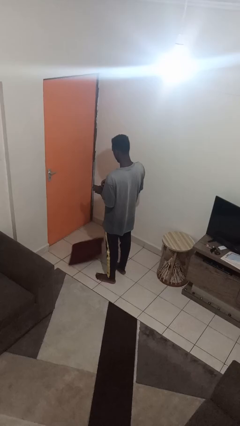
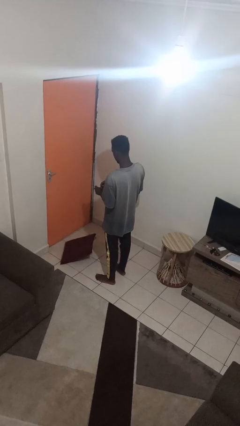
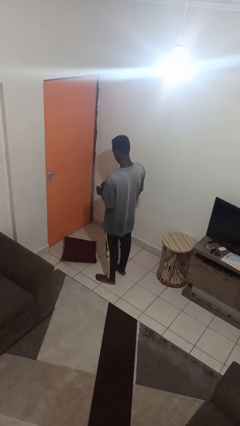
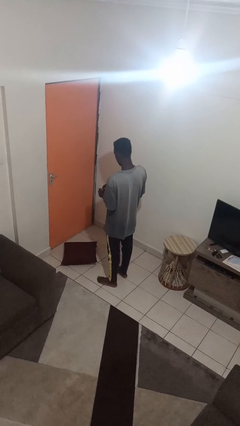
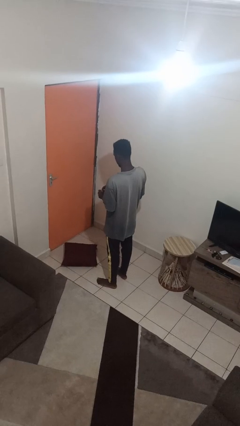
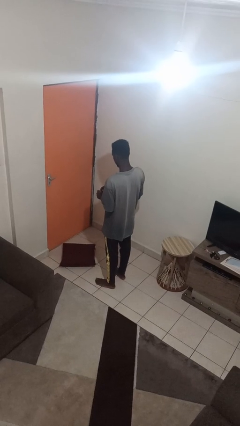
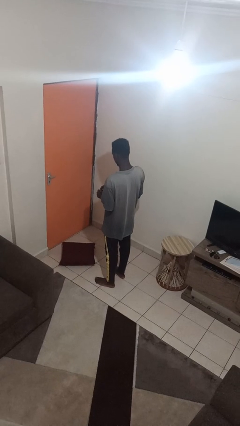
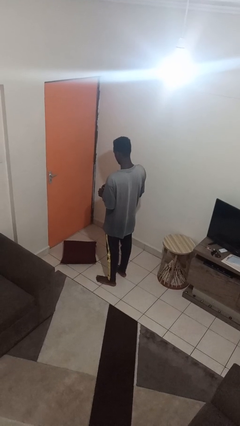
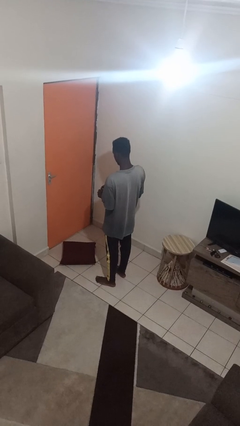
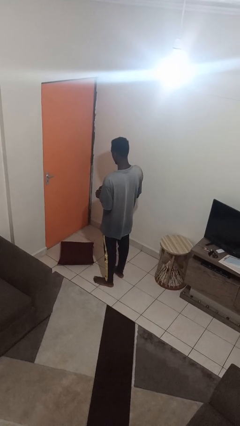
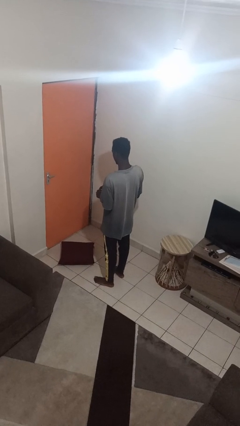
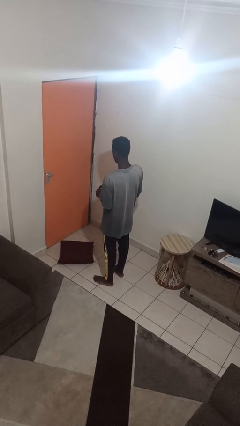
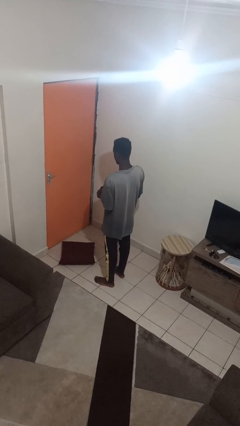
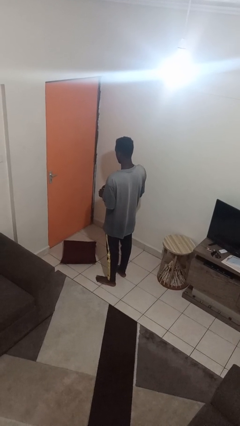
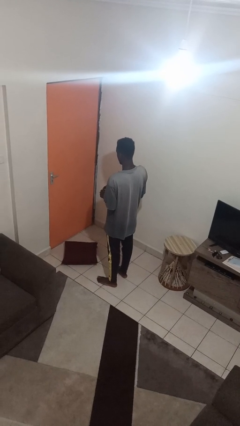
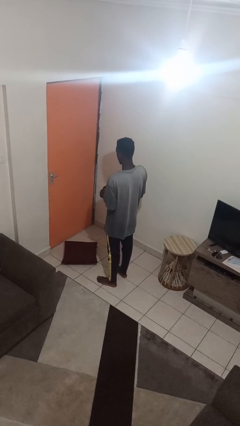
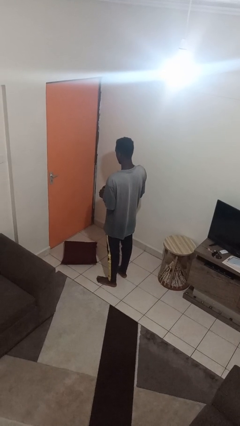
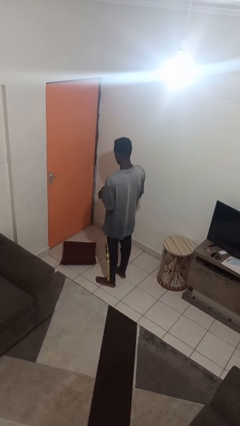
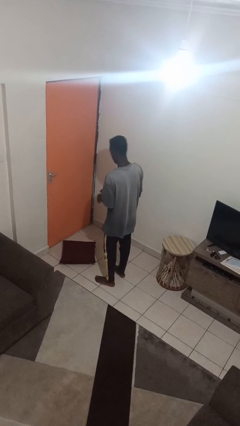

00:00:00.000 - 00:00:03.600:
person drops object

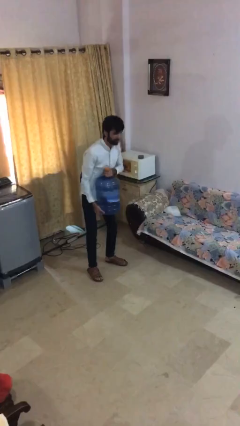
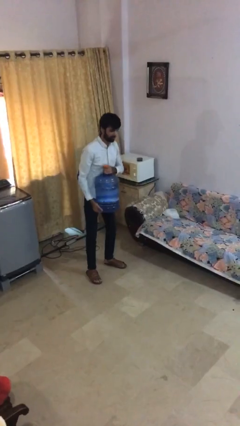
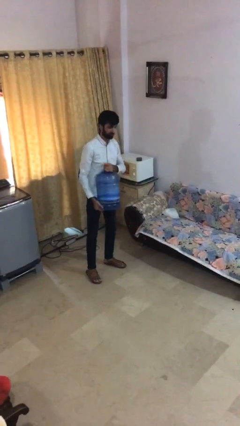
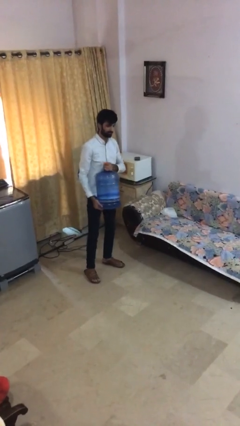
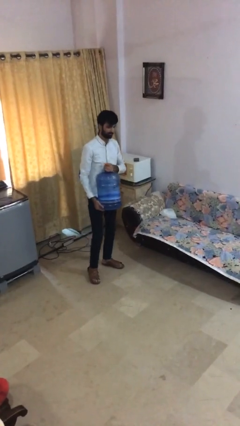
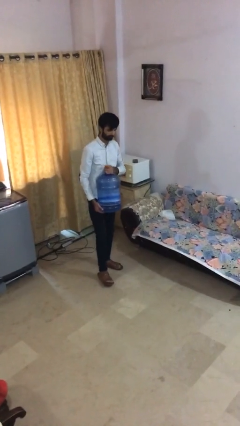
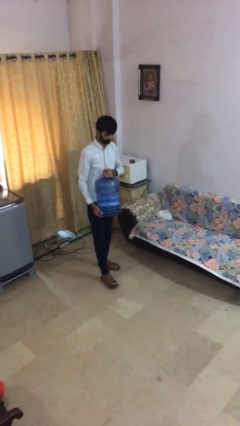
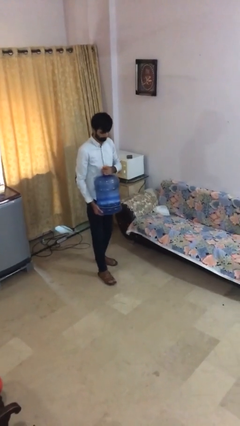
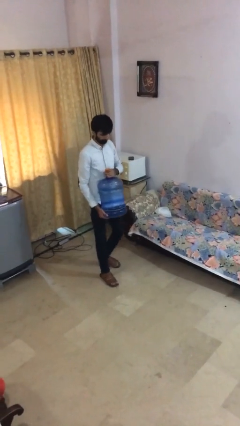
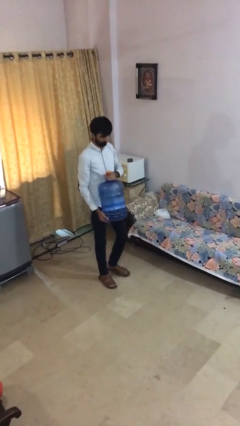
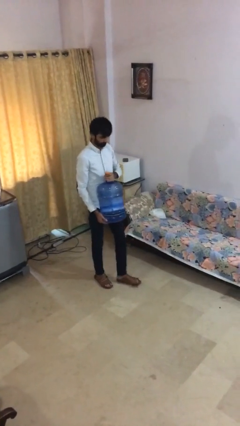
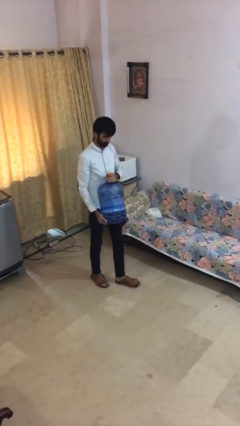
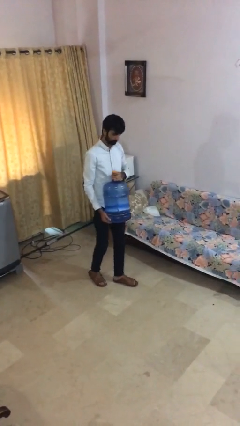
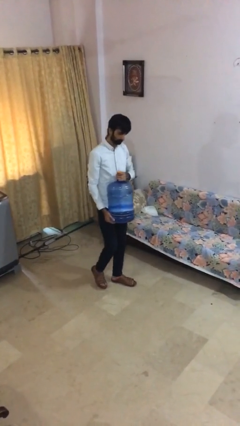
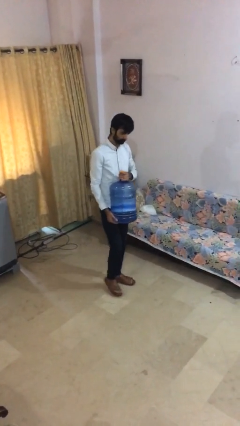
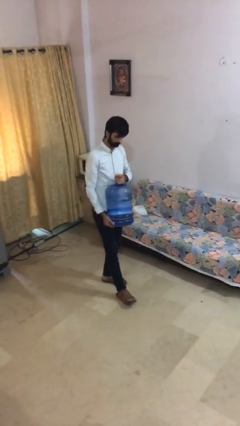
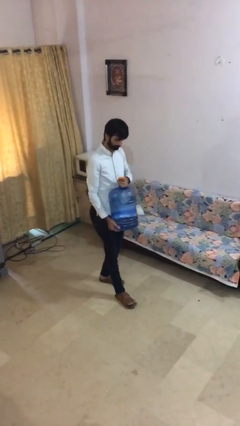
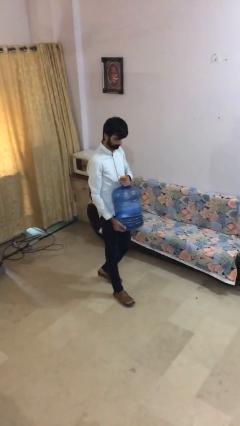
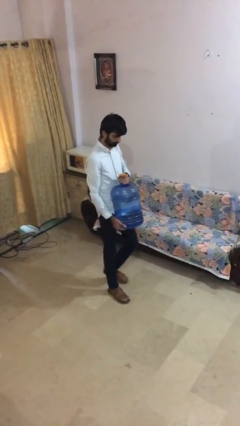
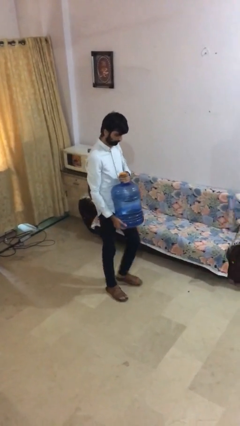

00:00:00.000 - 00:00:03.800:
person carries heavy object

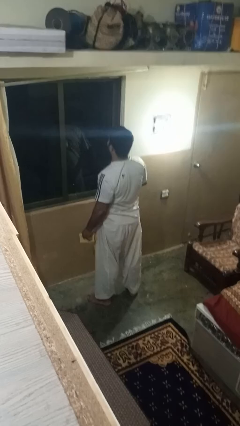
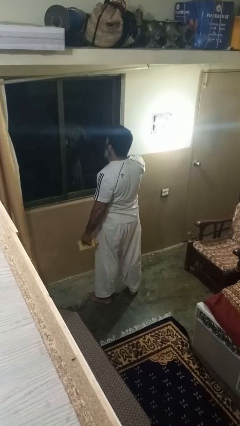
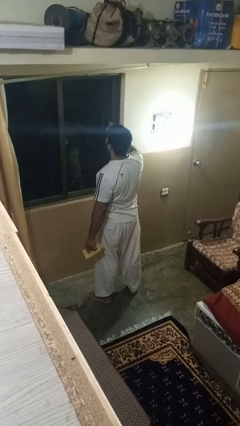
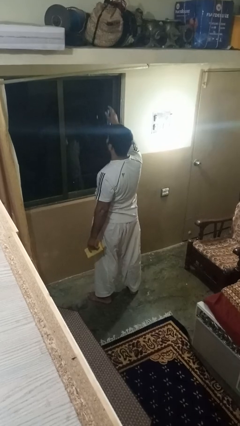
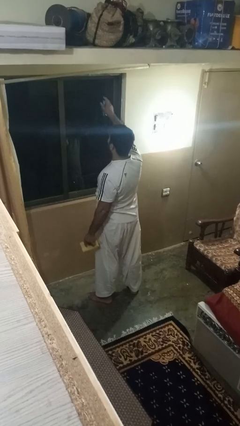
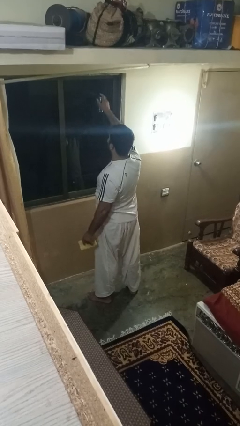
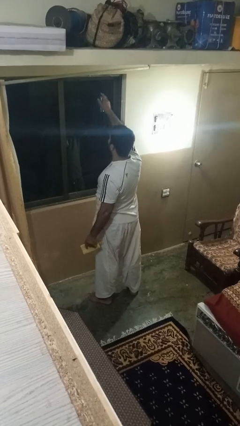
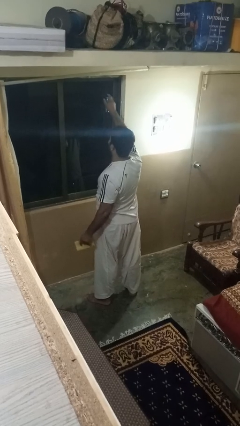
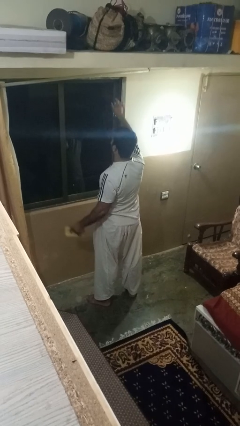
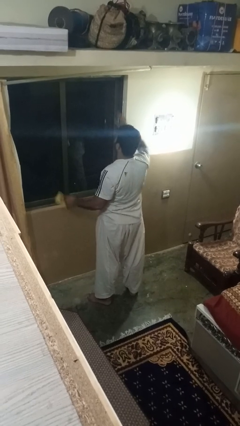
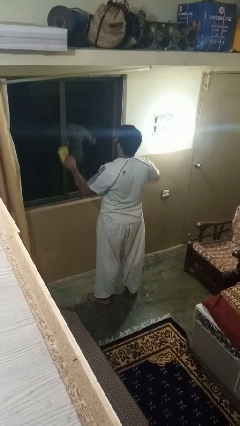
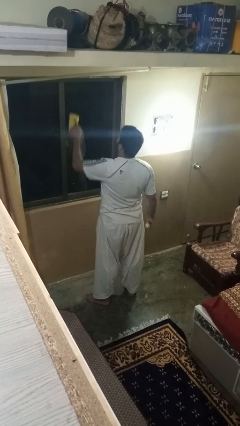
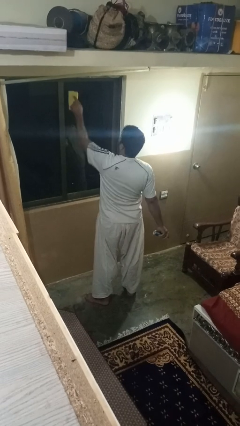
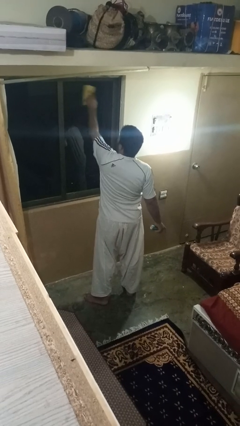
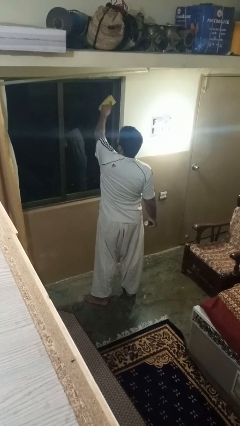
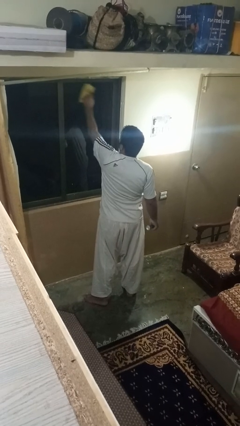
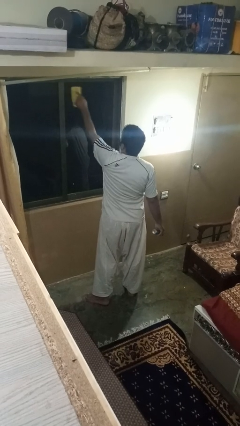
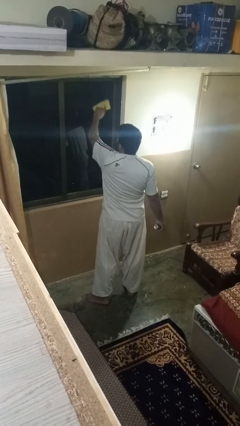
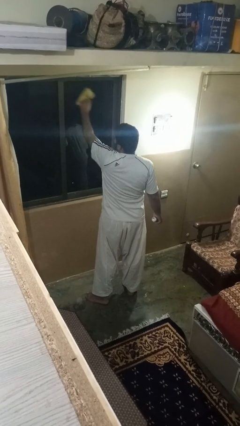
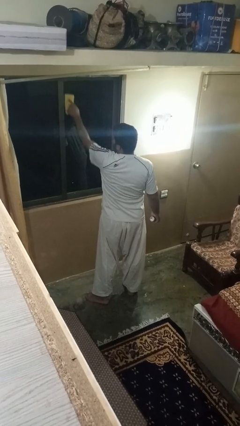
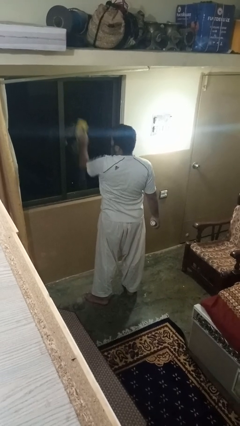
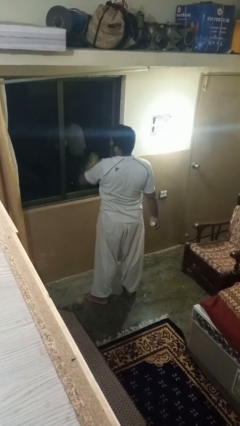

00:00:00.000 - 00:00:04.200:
person washes window

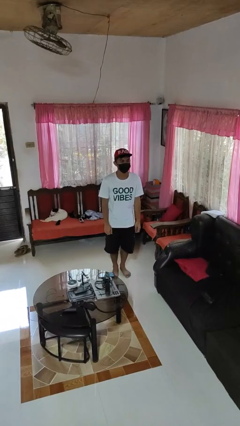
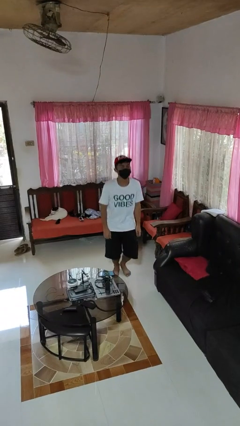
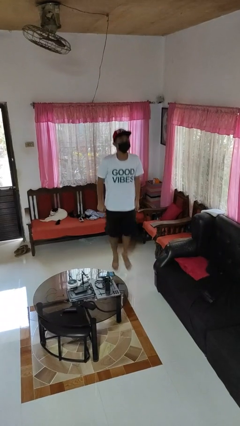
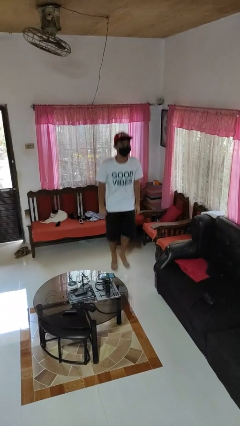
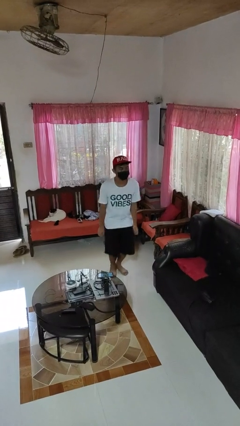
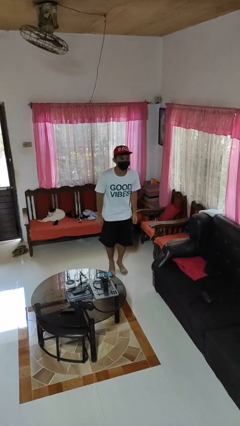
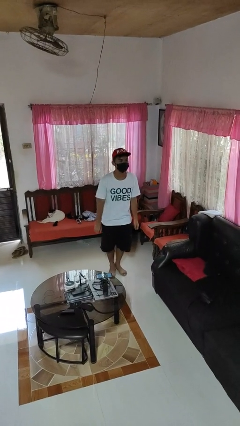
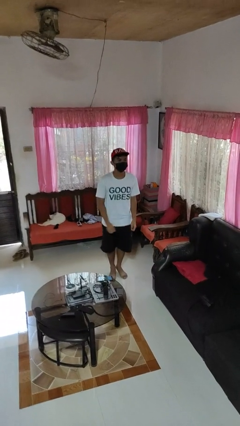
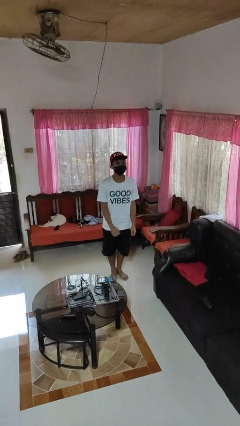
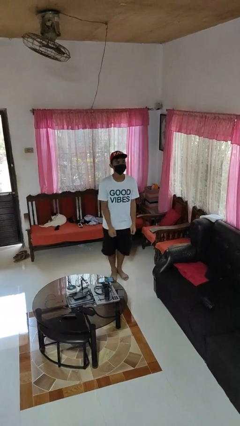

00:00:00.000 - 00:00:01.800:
person jumps

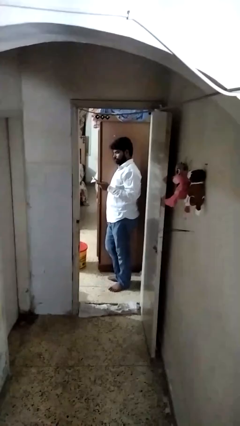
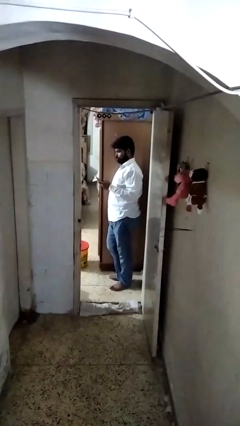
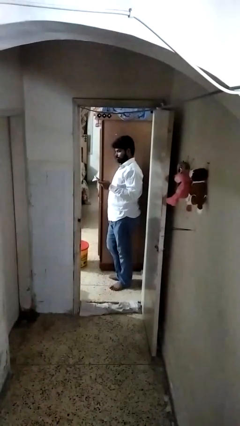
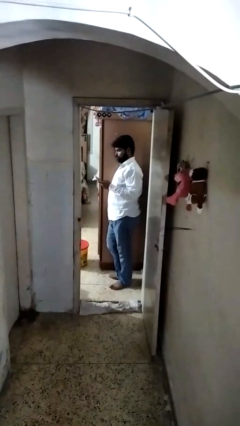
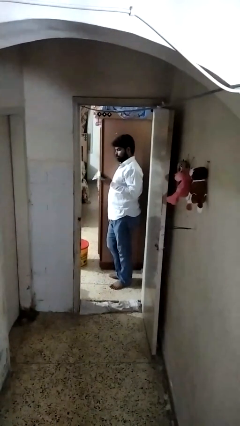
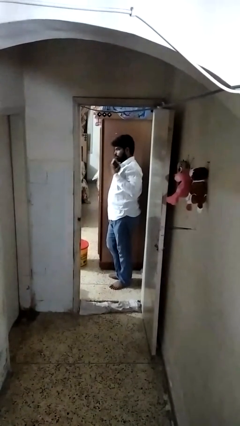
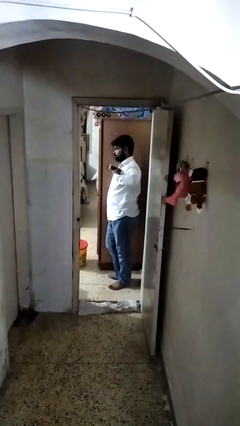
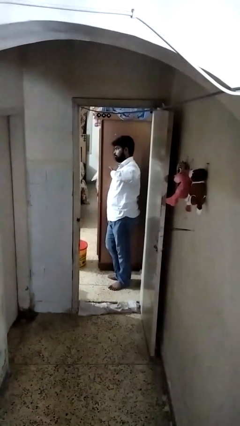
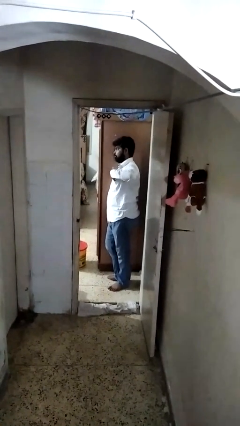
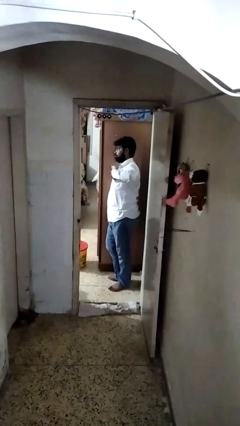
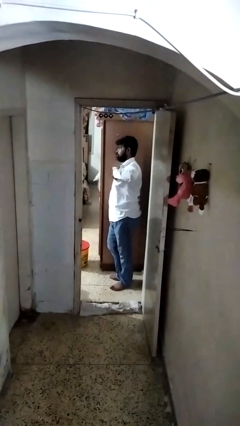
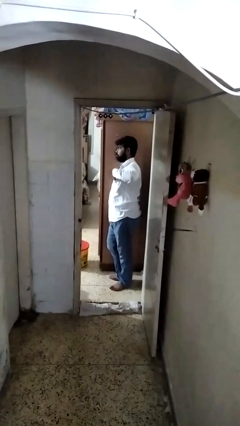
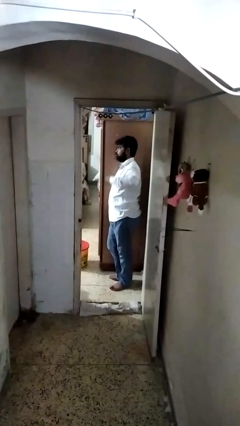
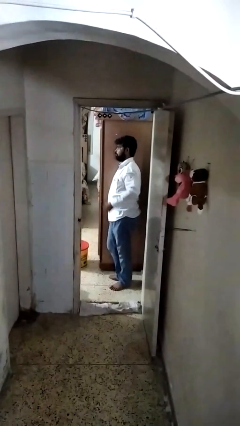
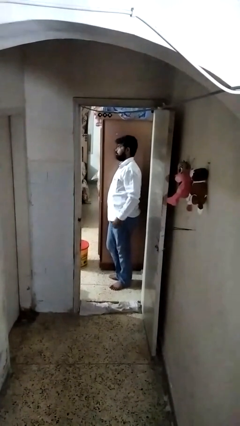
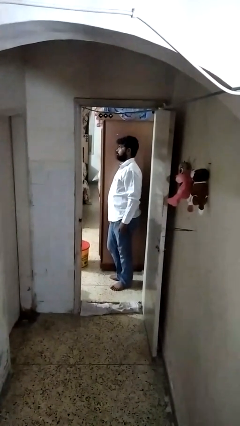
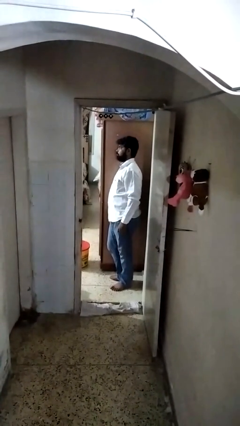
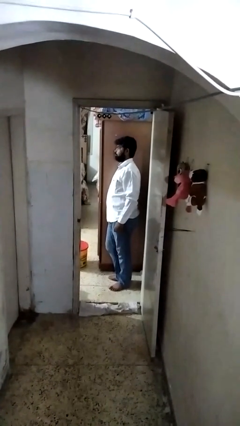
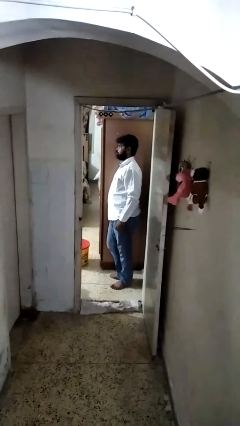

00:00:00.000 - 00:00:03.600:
person puts phone into pocket

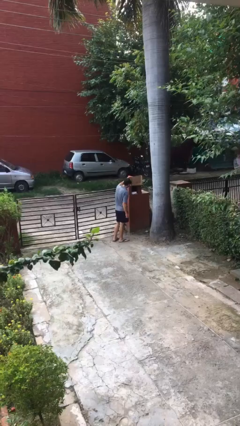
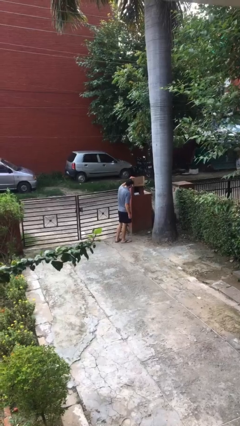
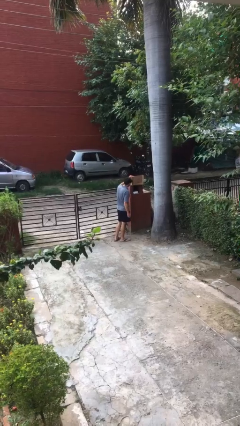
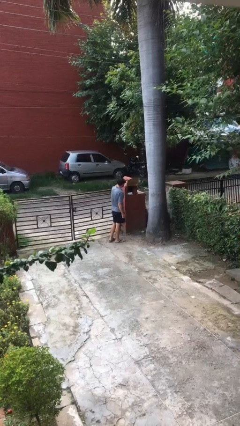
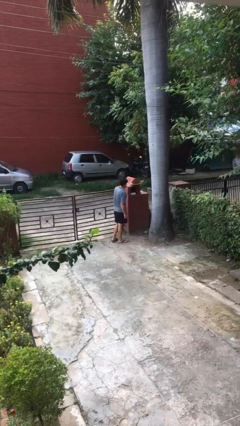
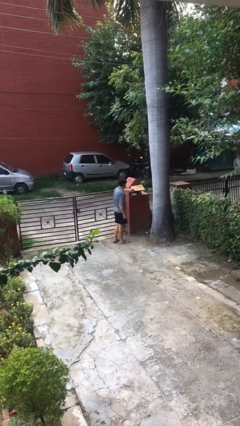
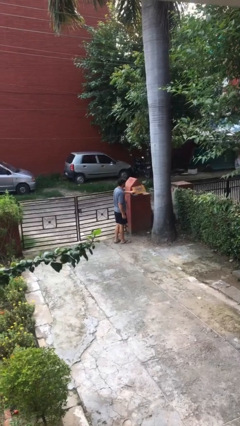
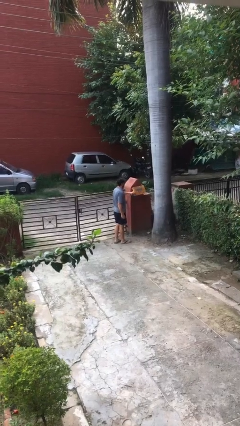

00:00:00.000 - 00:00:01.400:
person closes mailbox
